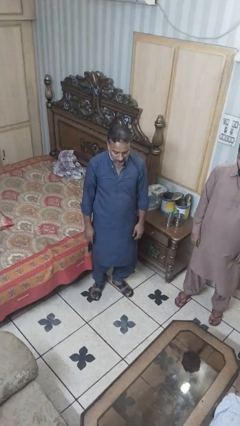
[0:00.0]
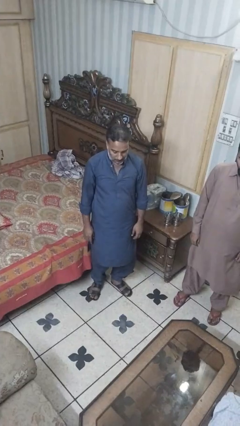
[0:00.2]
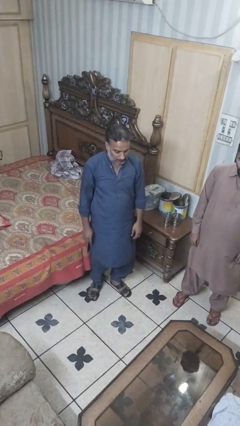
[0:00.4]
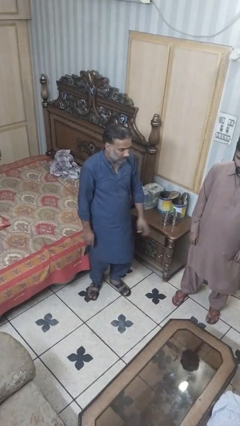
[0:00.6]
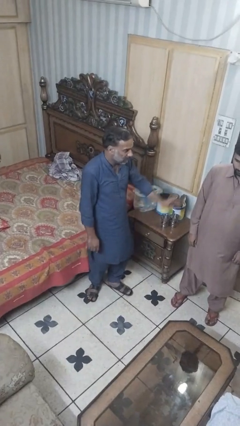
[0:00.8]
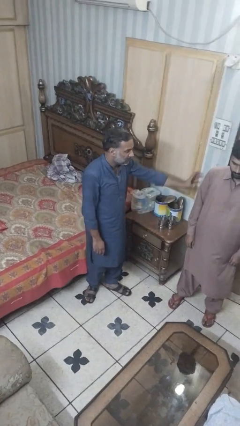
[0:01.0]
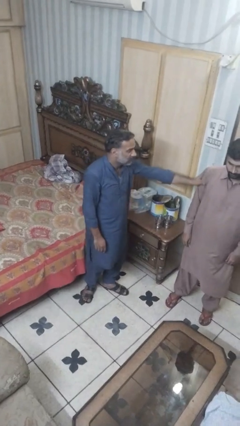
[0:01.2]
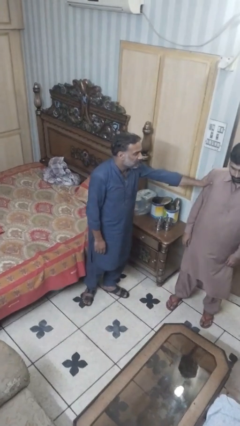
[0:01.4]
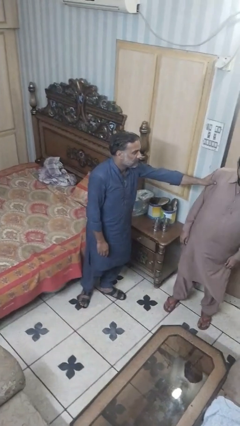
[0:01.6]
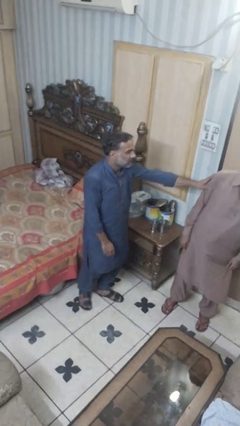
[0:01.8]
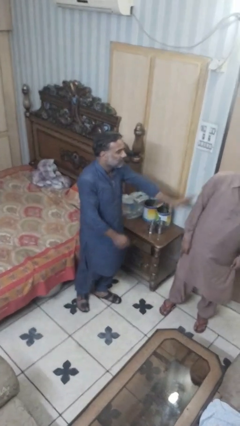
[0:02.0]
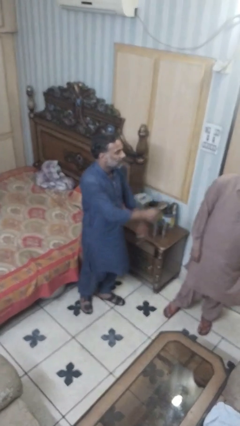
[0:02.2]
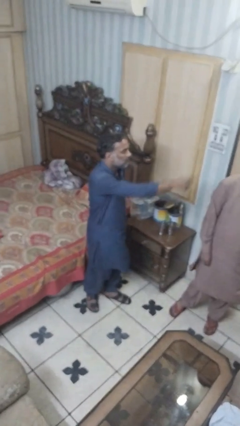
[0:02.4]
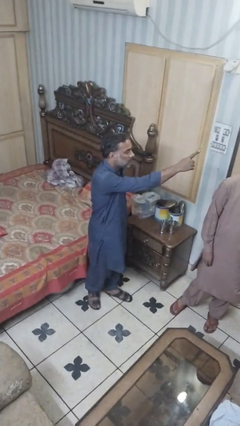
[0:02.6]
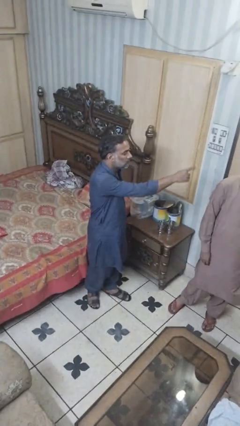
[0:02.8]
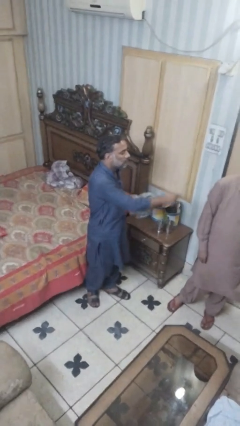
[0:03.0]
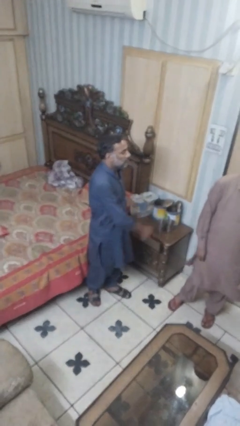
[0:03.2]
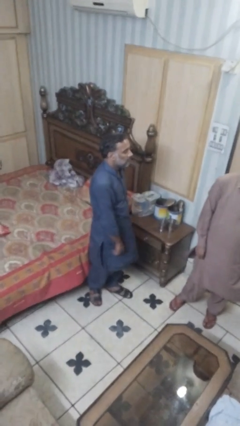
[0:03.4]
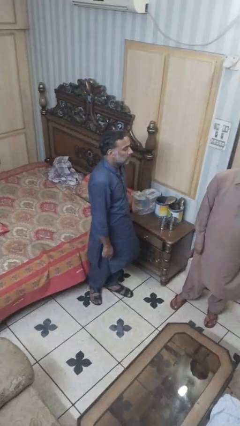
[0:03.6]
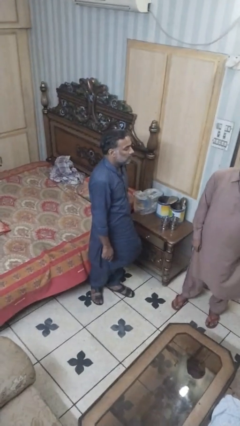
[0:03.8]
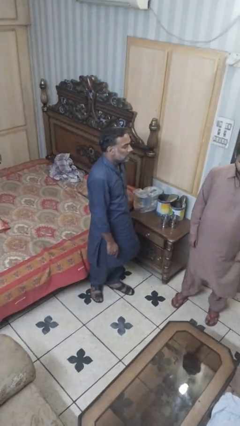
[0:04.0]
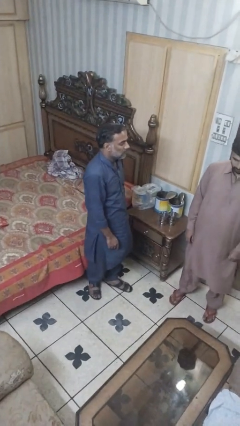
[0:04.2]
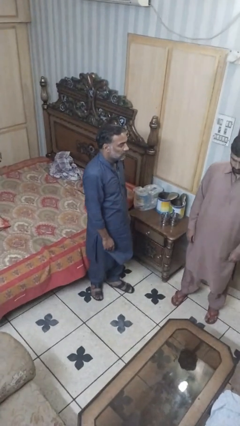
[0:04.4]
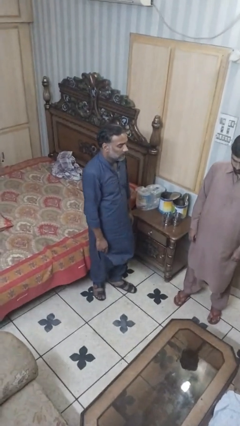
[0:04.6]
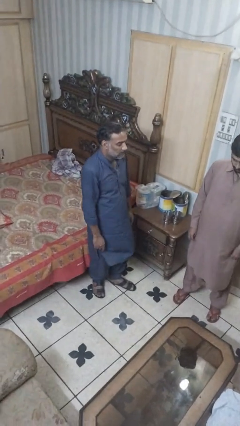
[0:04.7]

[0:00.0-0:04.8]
person shoves person

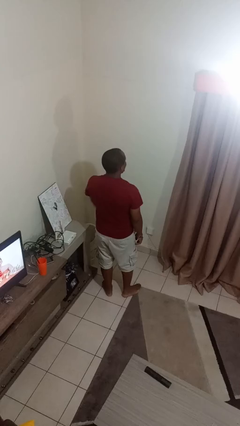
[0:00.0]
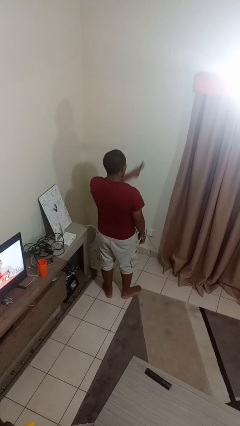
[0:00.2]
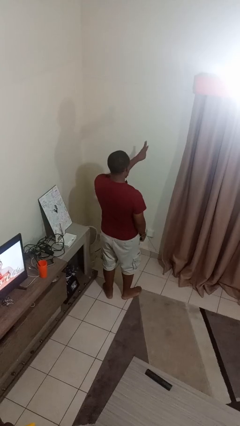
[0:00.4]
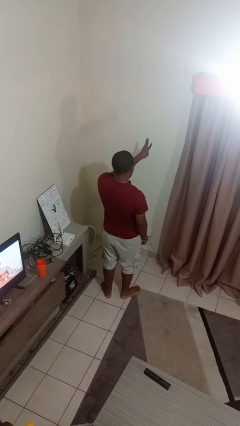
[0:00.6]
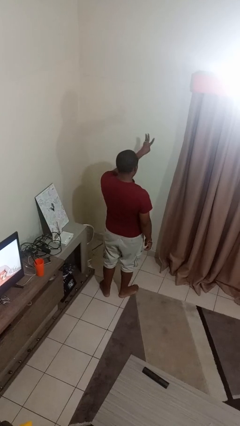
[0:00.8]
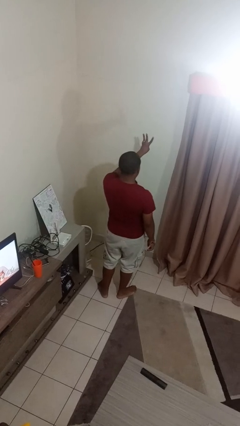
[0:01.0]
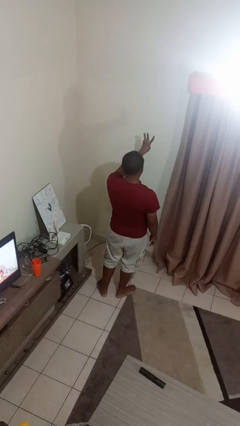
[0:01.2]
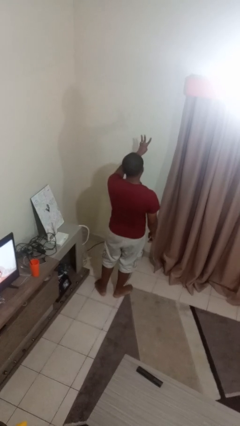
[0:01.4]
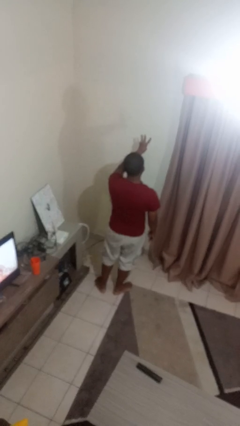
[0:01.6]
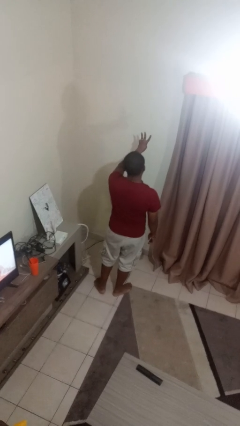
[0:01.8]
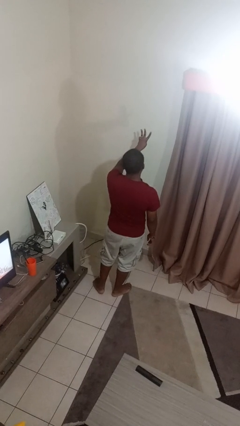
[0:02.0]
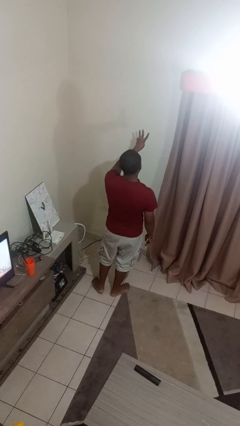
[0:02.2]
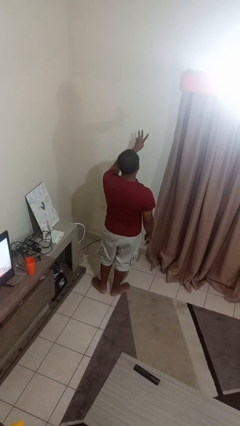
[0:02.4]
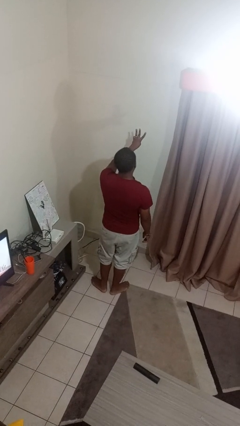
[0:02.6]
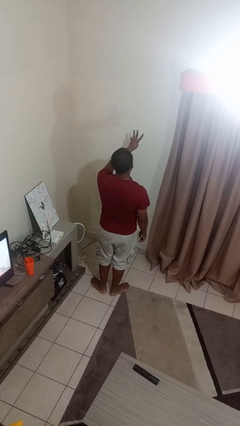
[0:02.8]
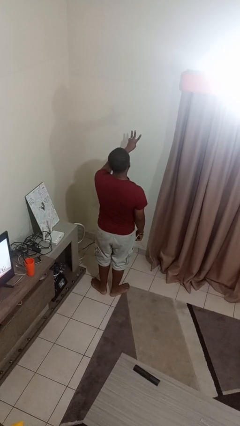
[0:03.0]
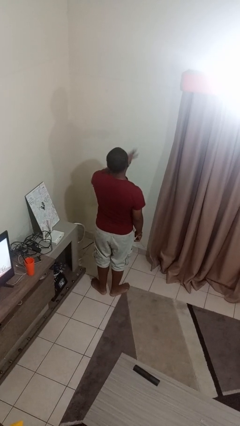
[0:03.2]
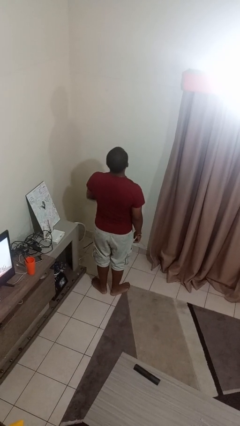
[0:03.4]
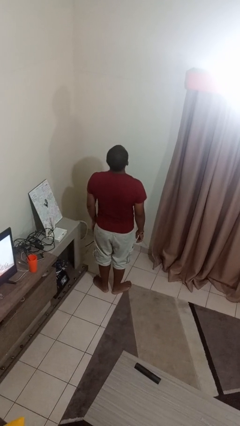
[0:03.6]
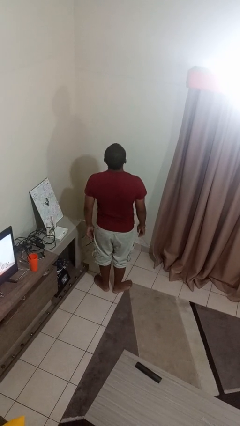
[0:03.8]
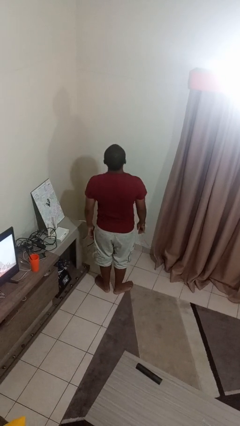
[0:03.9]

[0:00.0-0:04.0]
person gestures number three

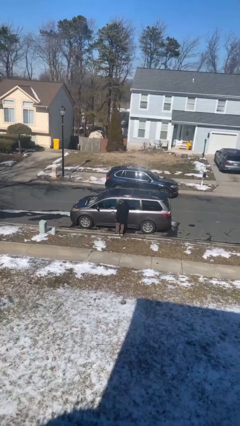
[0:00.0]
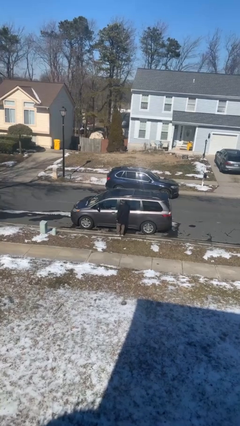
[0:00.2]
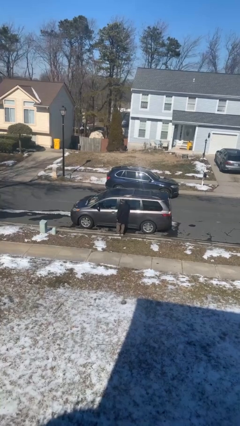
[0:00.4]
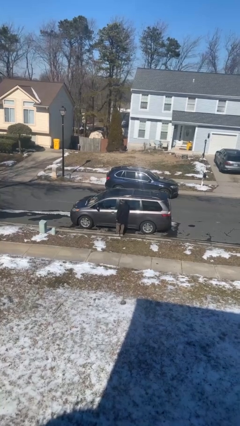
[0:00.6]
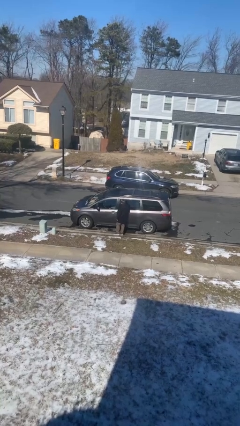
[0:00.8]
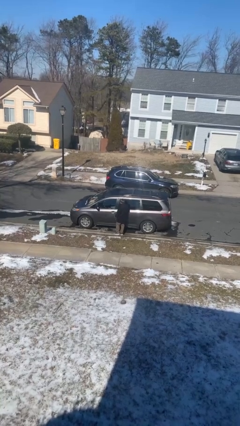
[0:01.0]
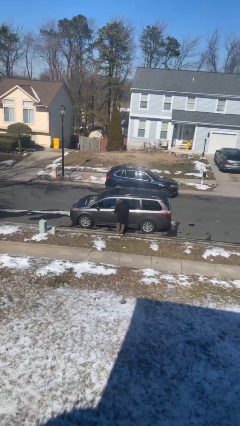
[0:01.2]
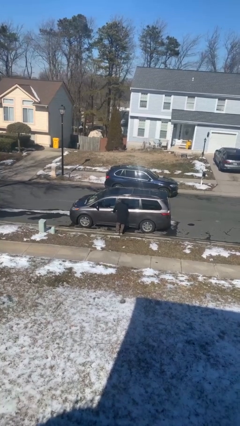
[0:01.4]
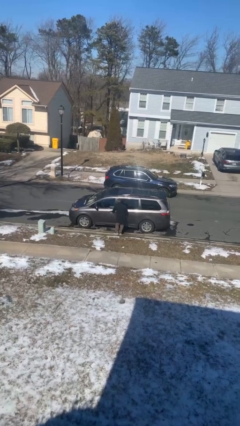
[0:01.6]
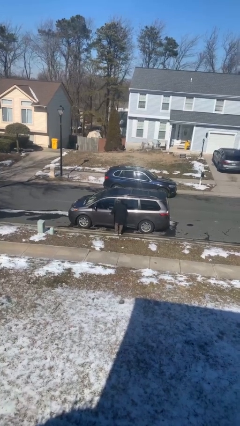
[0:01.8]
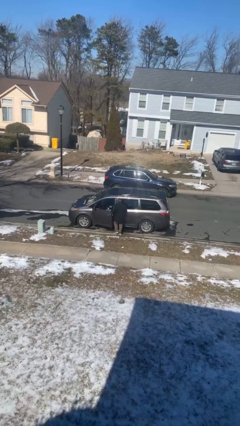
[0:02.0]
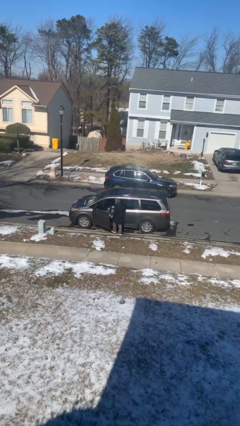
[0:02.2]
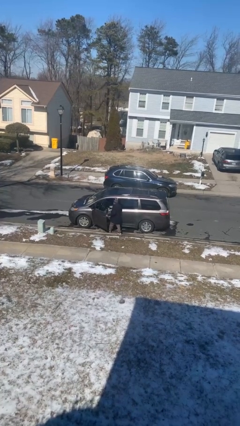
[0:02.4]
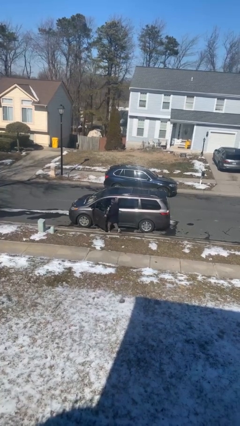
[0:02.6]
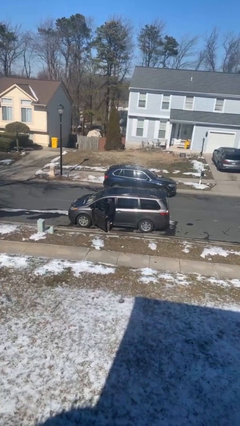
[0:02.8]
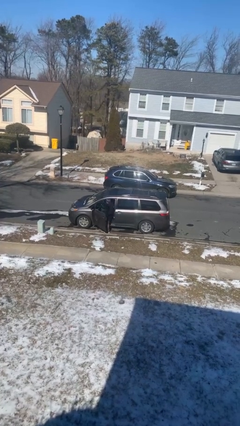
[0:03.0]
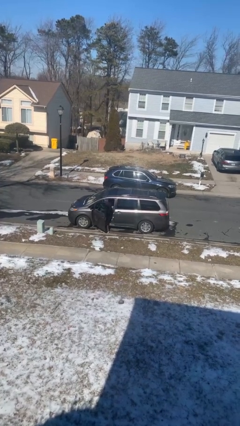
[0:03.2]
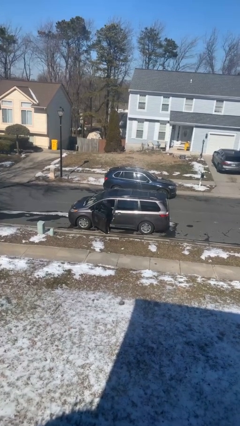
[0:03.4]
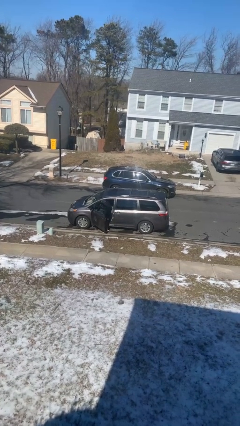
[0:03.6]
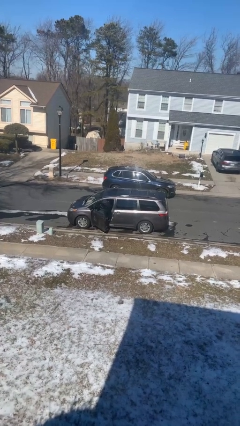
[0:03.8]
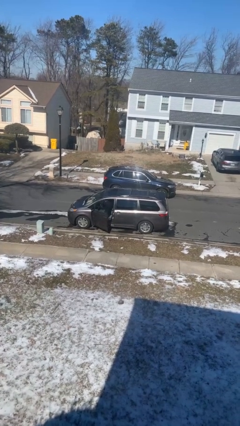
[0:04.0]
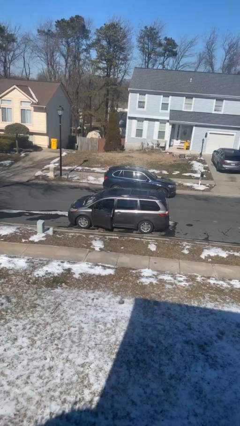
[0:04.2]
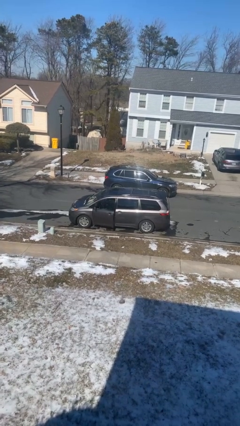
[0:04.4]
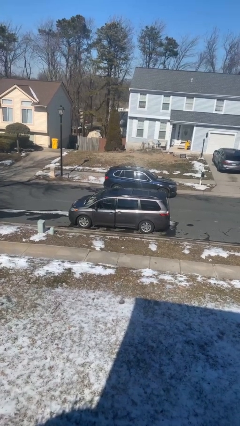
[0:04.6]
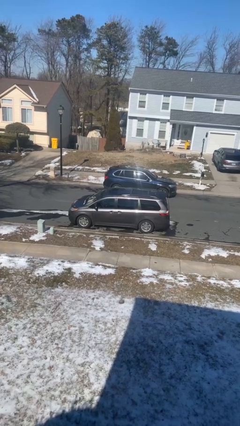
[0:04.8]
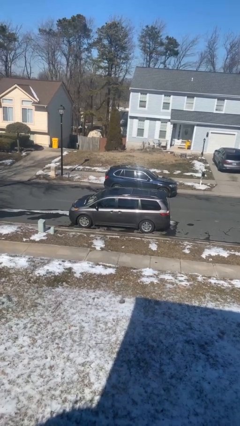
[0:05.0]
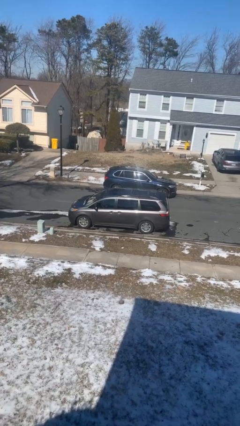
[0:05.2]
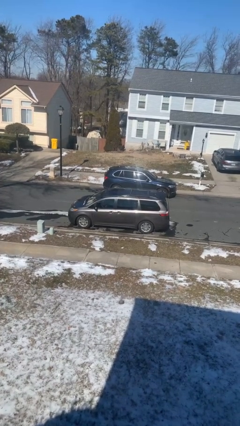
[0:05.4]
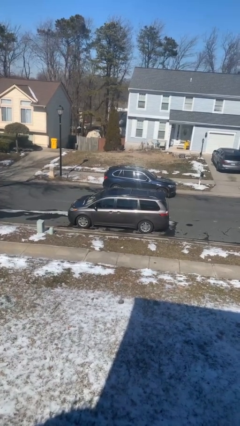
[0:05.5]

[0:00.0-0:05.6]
car picks up person

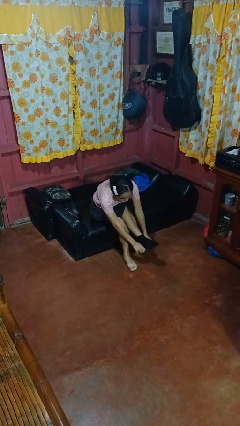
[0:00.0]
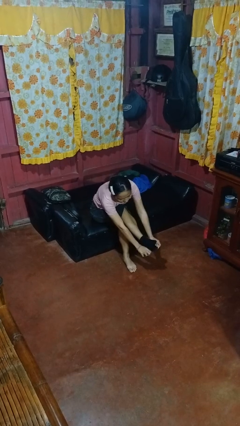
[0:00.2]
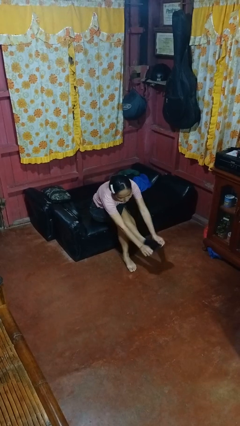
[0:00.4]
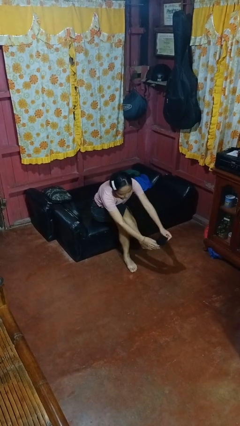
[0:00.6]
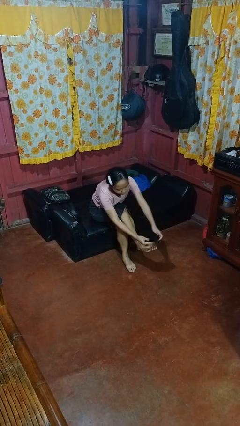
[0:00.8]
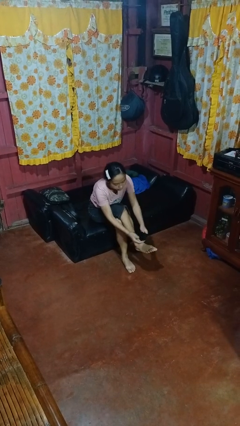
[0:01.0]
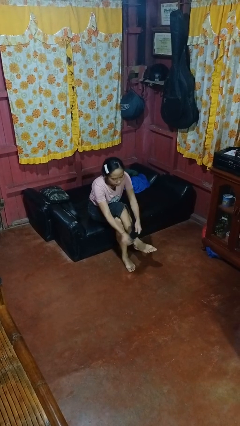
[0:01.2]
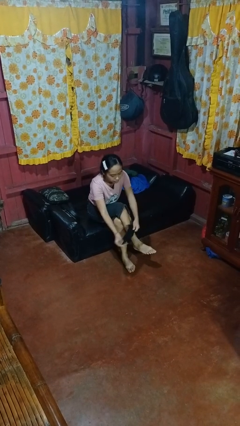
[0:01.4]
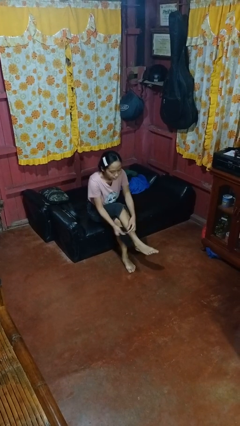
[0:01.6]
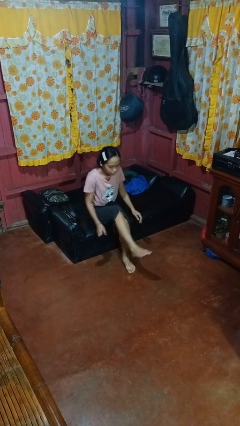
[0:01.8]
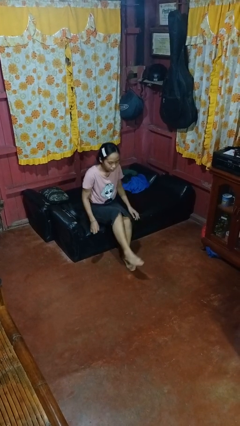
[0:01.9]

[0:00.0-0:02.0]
person takes off socks

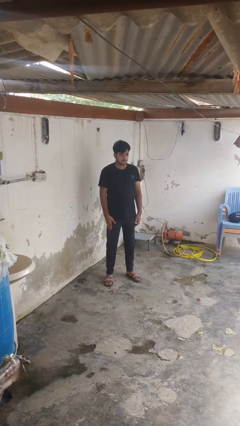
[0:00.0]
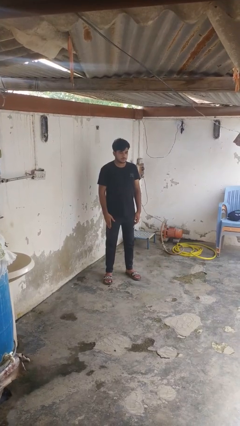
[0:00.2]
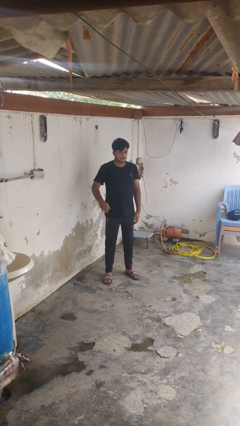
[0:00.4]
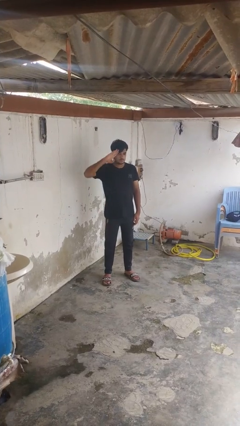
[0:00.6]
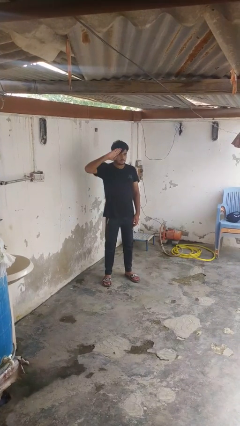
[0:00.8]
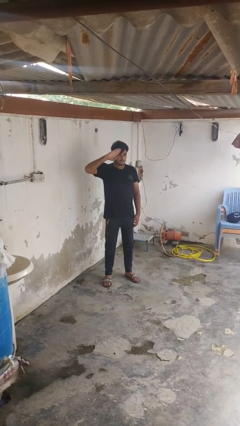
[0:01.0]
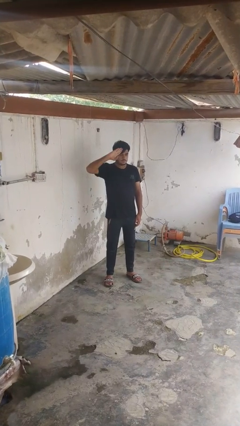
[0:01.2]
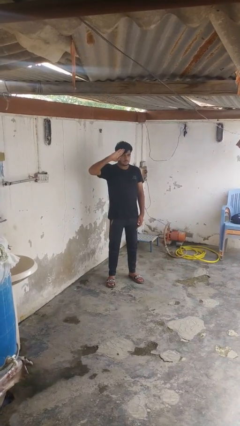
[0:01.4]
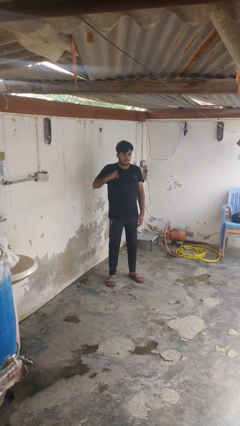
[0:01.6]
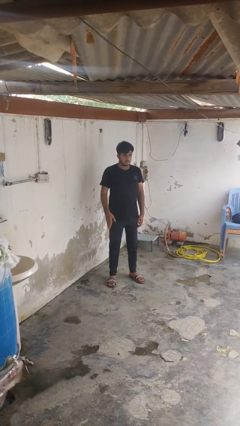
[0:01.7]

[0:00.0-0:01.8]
person salutes
